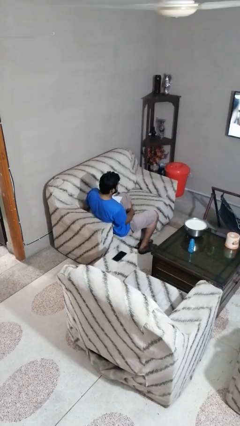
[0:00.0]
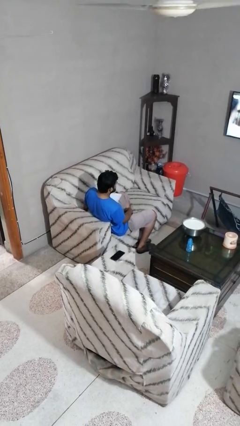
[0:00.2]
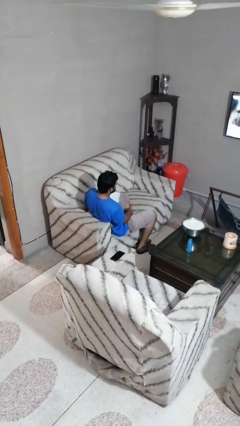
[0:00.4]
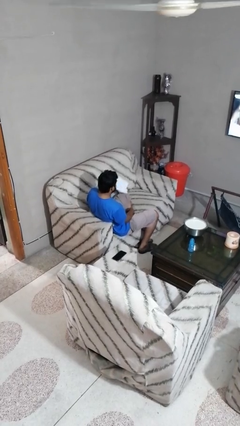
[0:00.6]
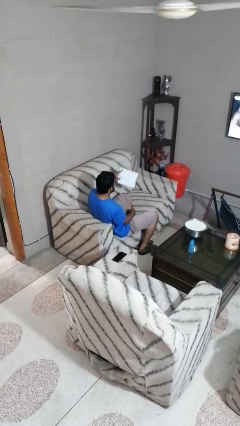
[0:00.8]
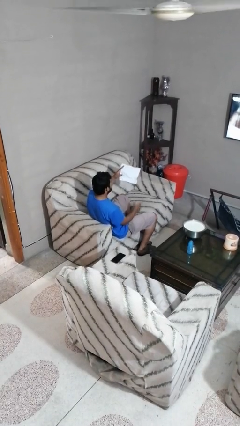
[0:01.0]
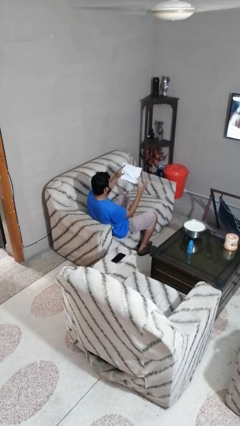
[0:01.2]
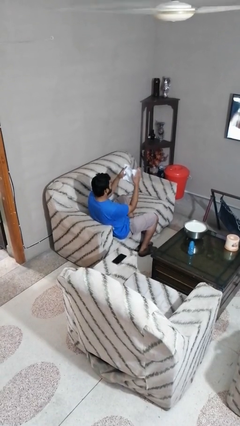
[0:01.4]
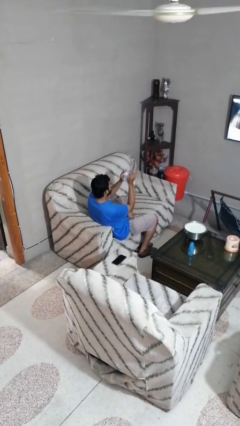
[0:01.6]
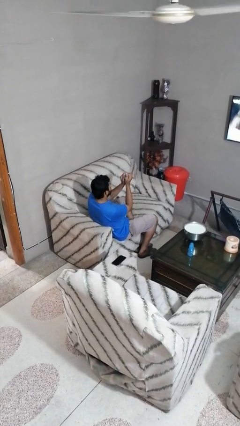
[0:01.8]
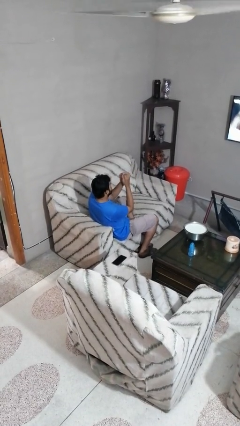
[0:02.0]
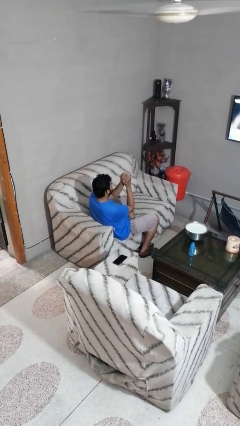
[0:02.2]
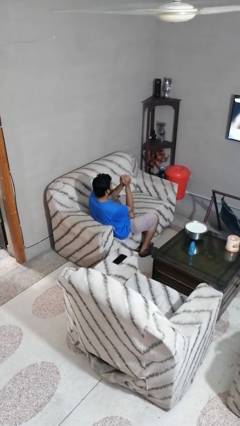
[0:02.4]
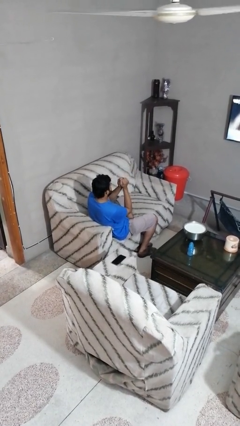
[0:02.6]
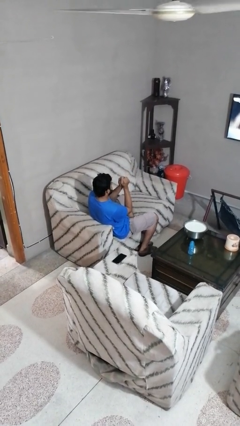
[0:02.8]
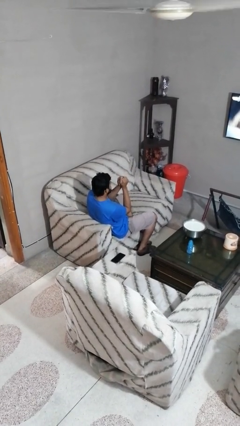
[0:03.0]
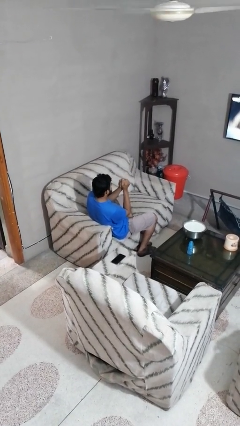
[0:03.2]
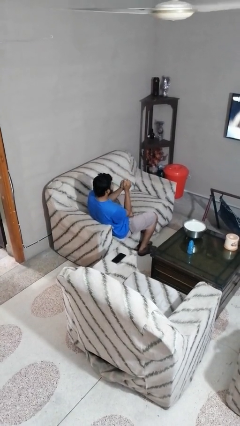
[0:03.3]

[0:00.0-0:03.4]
person crumples paper

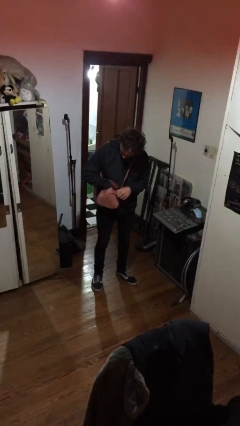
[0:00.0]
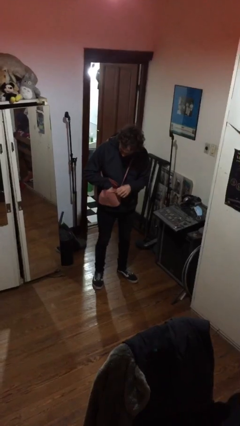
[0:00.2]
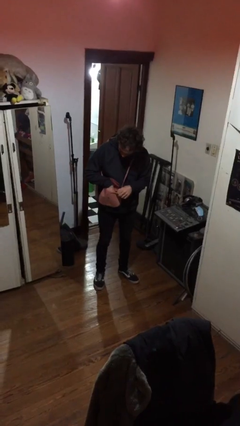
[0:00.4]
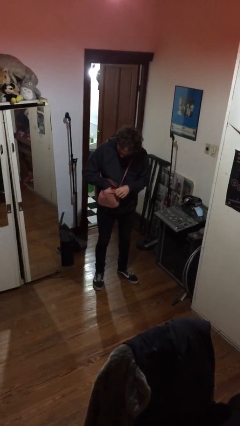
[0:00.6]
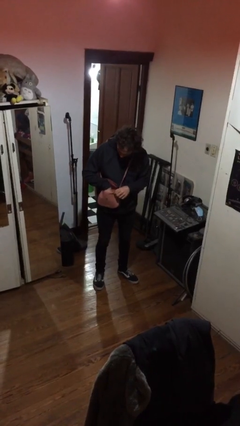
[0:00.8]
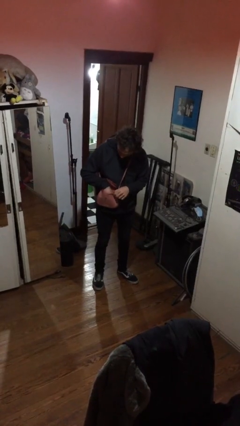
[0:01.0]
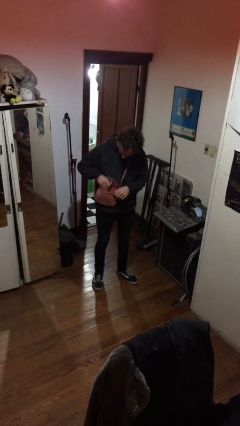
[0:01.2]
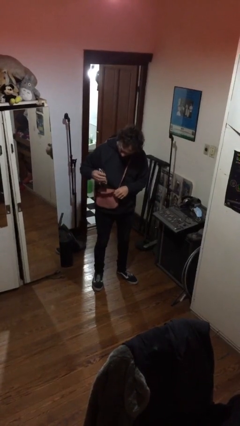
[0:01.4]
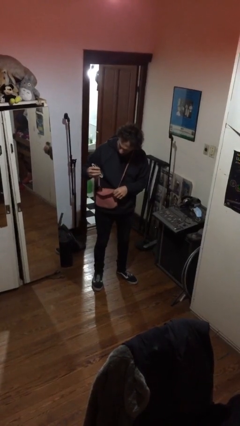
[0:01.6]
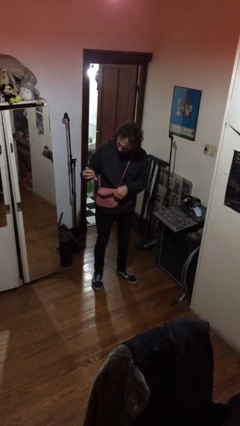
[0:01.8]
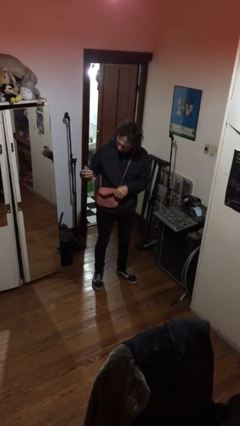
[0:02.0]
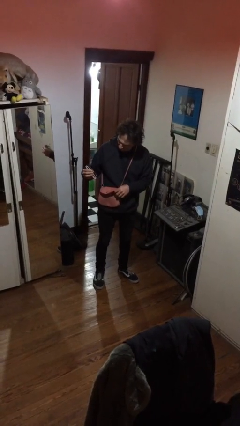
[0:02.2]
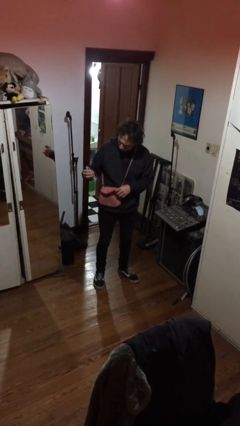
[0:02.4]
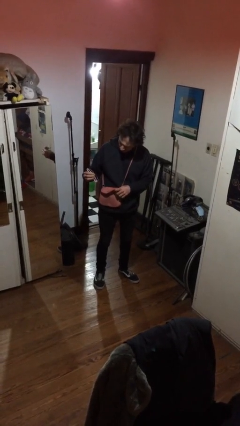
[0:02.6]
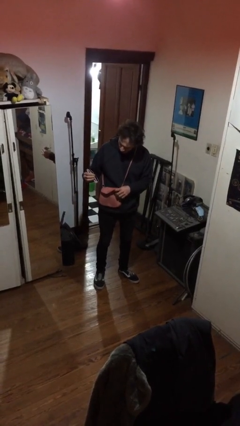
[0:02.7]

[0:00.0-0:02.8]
person takes object from purse

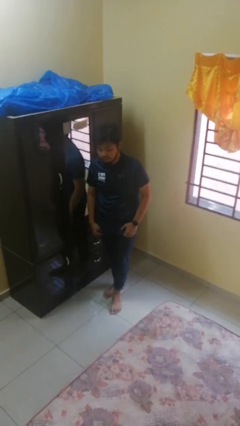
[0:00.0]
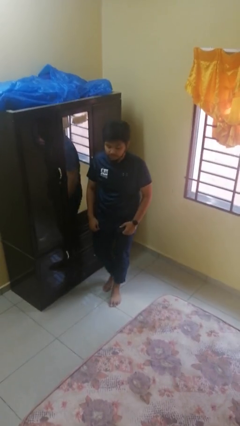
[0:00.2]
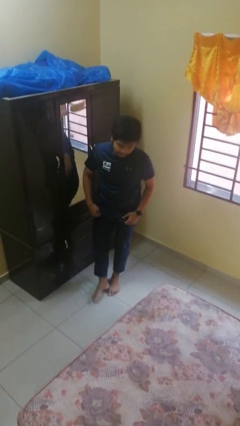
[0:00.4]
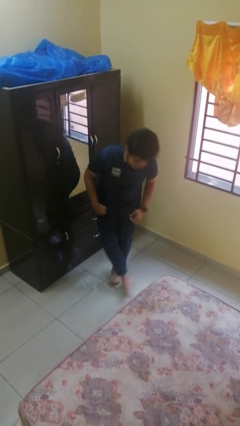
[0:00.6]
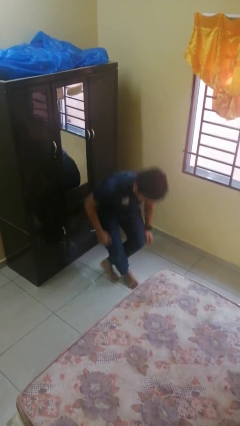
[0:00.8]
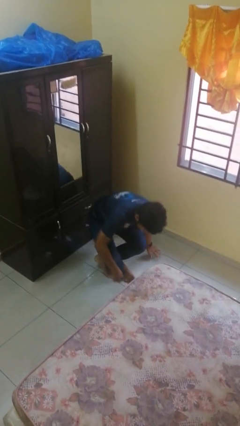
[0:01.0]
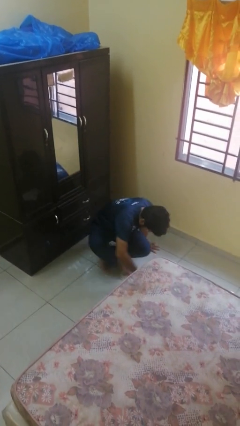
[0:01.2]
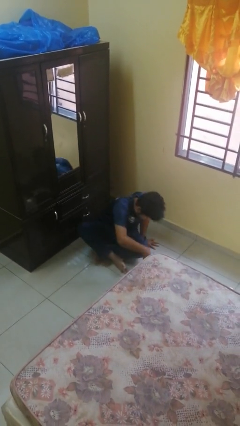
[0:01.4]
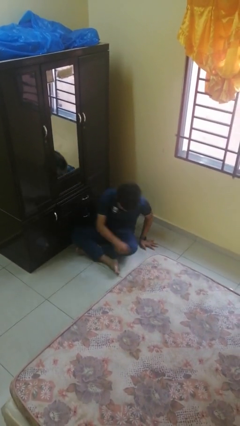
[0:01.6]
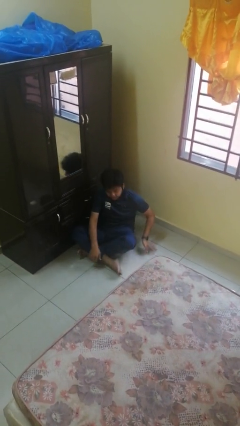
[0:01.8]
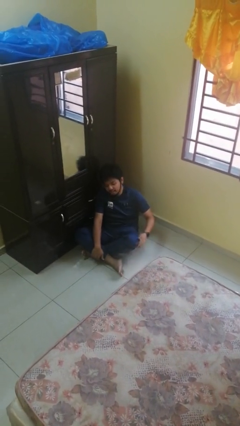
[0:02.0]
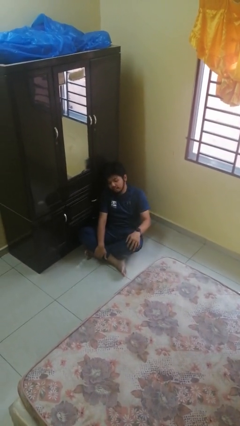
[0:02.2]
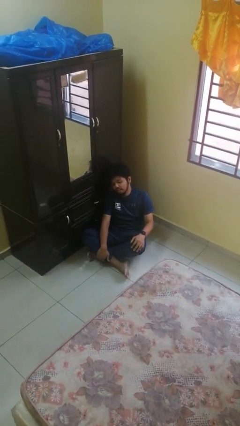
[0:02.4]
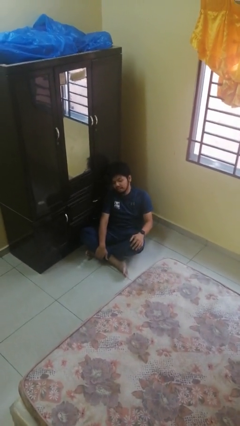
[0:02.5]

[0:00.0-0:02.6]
person sits crisscross

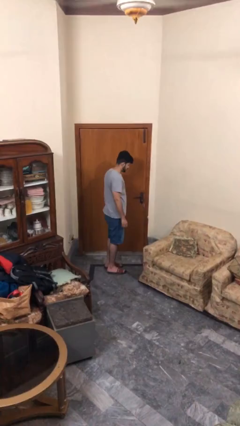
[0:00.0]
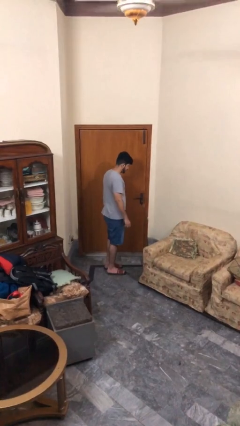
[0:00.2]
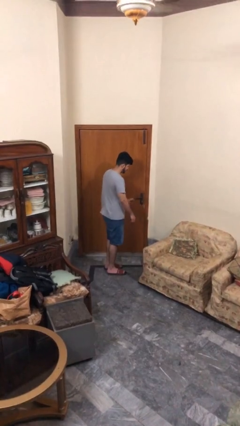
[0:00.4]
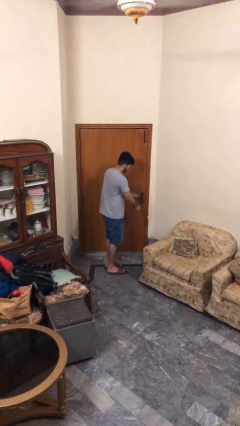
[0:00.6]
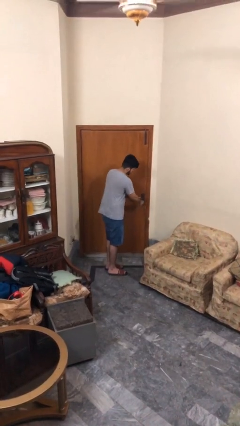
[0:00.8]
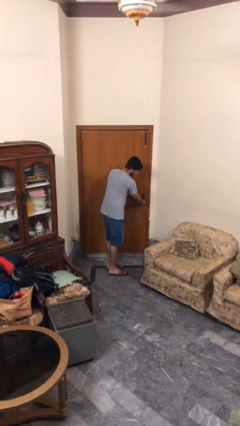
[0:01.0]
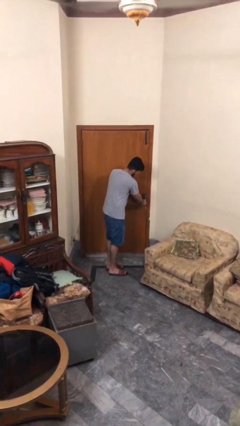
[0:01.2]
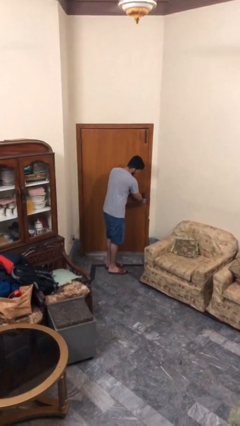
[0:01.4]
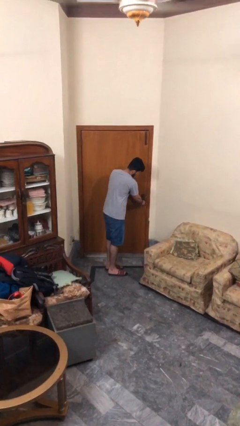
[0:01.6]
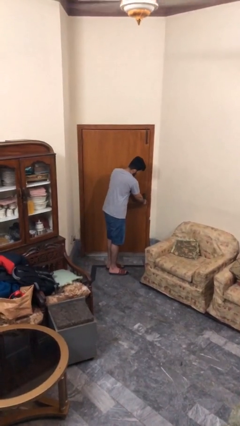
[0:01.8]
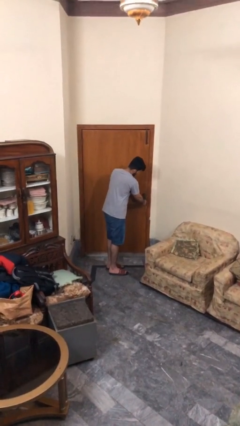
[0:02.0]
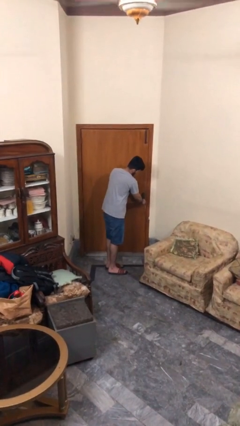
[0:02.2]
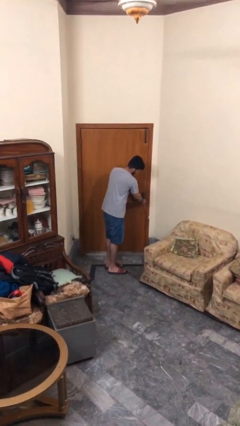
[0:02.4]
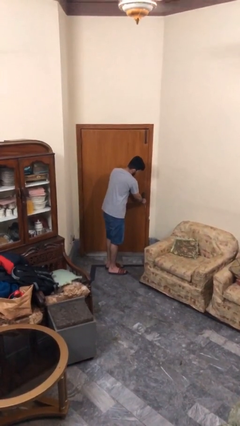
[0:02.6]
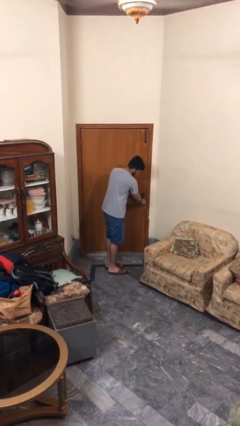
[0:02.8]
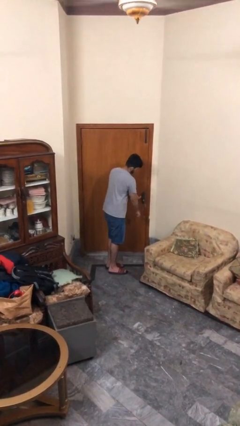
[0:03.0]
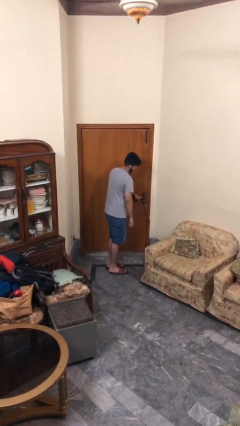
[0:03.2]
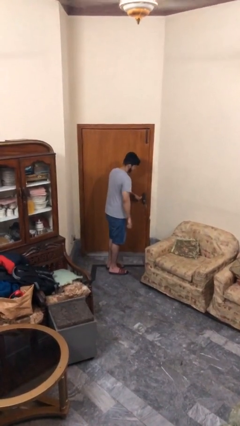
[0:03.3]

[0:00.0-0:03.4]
person unlocks door with keys

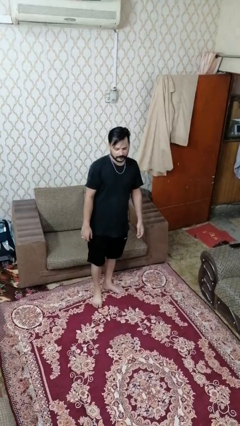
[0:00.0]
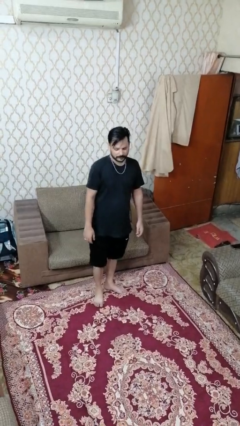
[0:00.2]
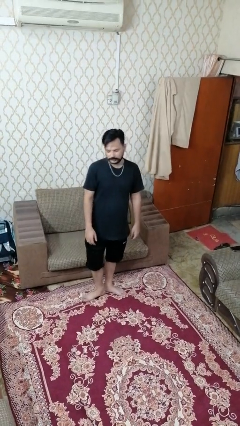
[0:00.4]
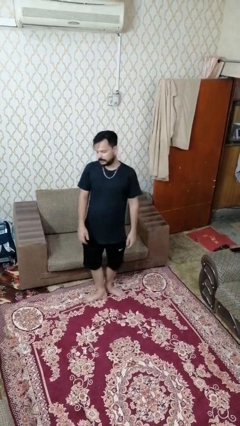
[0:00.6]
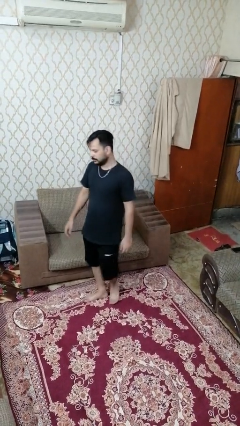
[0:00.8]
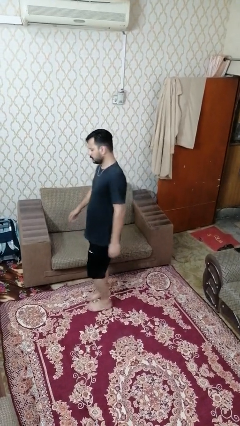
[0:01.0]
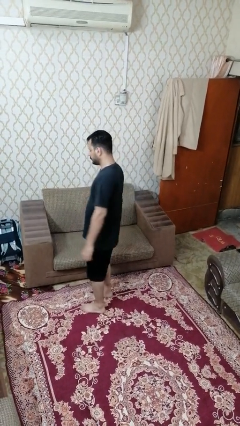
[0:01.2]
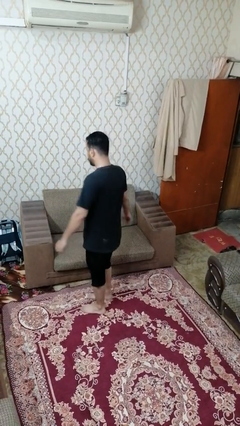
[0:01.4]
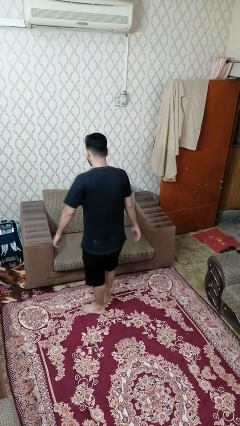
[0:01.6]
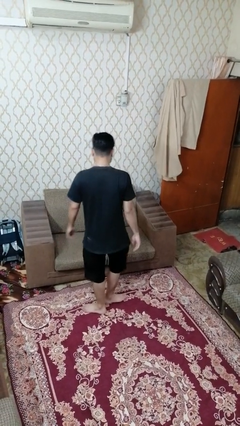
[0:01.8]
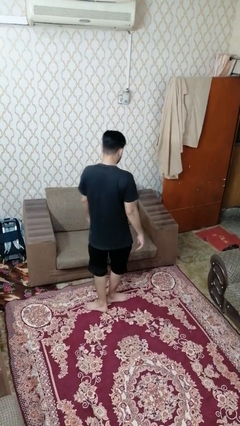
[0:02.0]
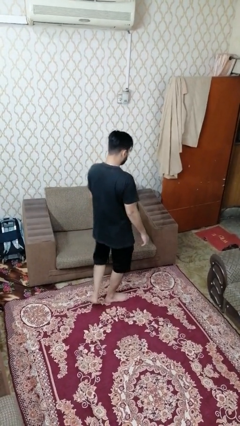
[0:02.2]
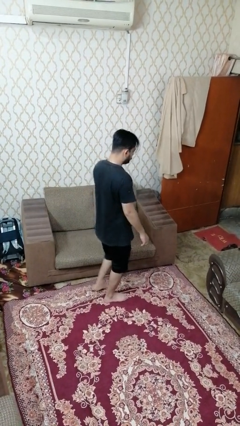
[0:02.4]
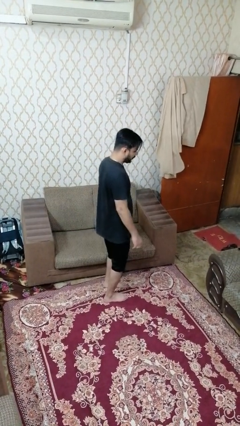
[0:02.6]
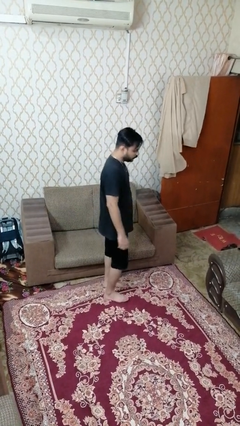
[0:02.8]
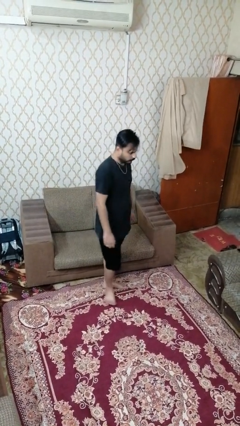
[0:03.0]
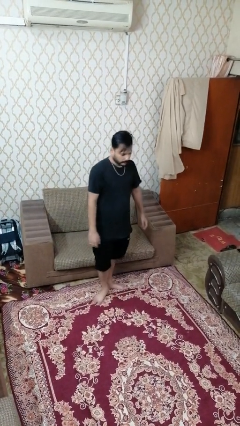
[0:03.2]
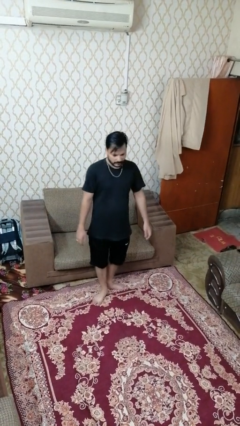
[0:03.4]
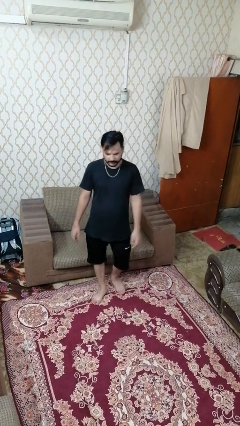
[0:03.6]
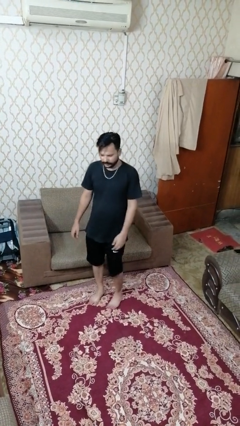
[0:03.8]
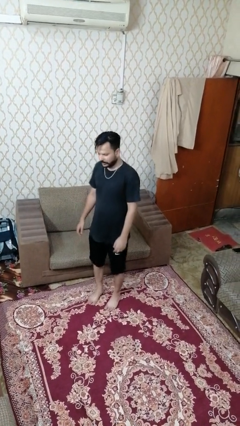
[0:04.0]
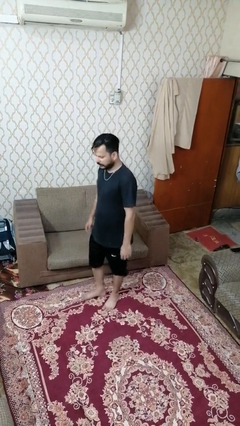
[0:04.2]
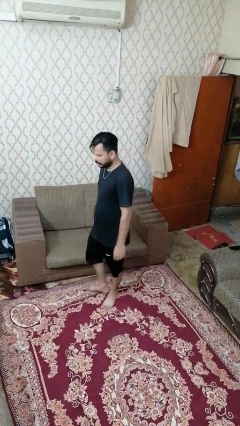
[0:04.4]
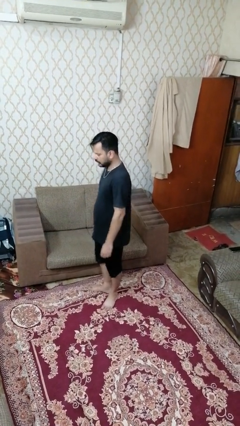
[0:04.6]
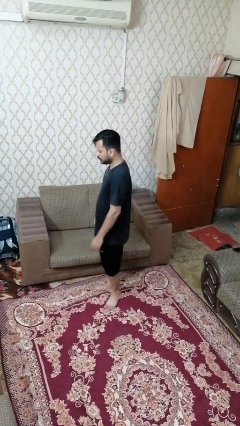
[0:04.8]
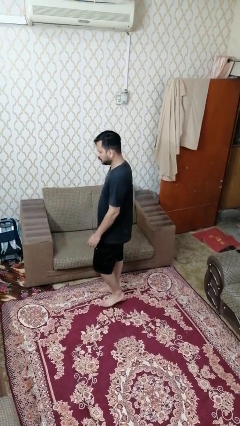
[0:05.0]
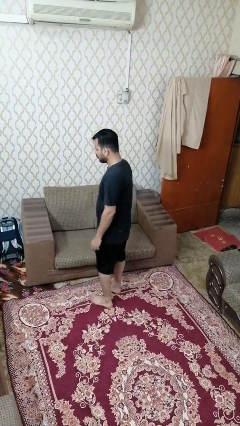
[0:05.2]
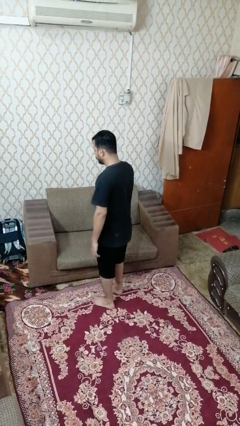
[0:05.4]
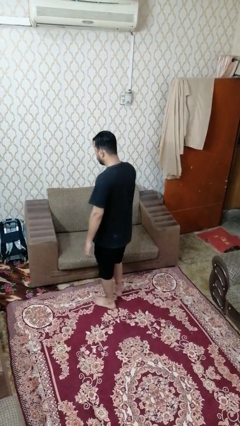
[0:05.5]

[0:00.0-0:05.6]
person twirls

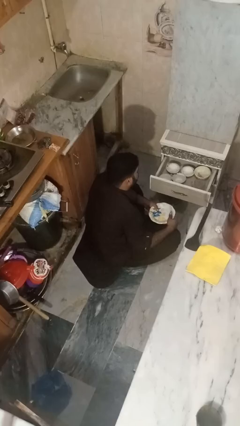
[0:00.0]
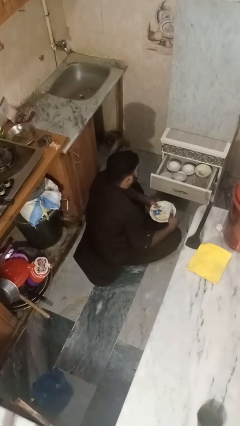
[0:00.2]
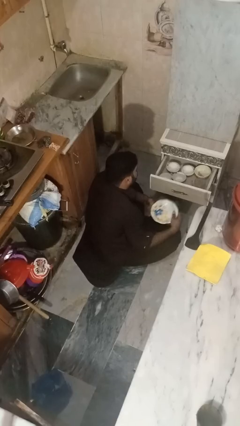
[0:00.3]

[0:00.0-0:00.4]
person puts object into kitchen drawer
